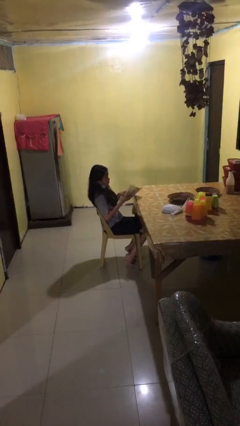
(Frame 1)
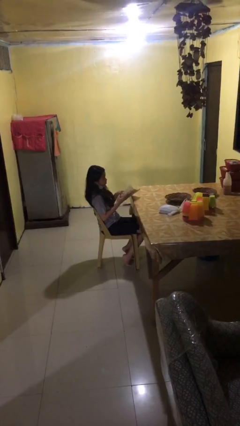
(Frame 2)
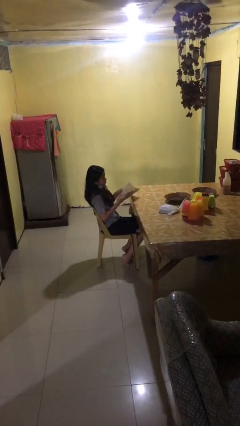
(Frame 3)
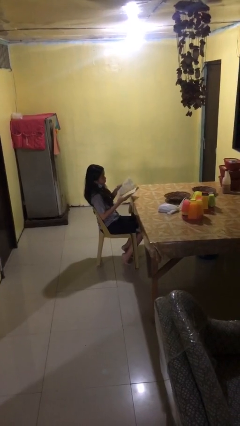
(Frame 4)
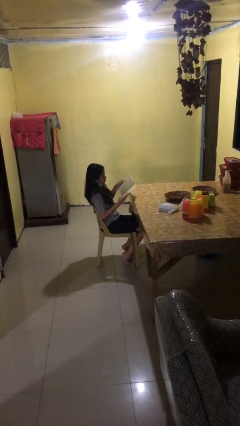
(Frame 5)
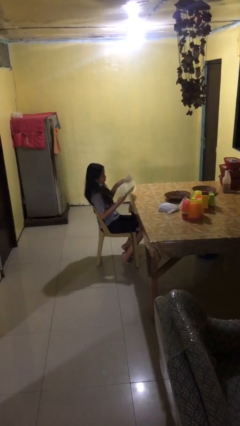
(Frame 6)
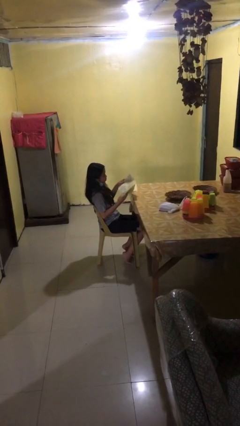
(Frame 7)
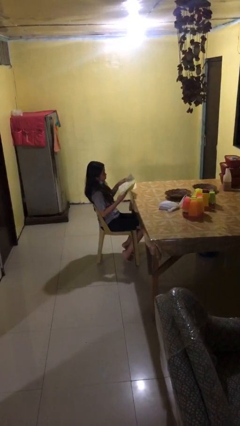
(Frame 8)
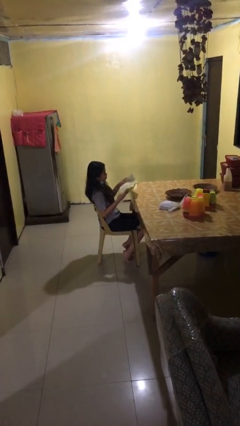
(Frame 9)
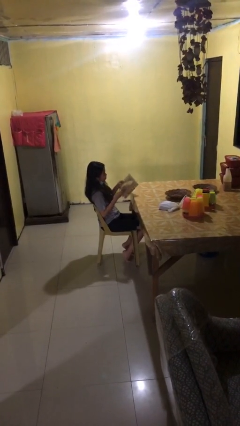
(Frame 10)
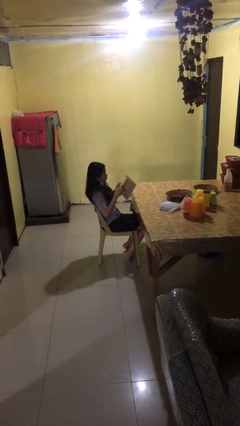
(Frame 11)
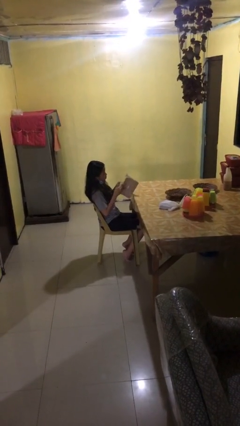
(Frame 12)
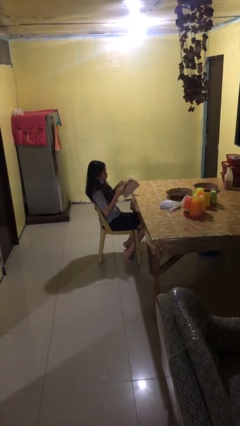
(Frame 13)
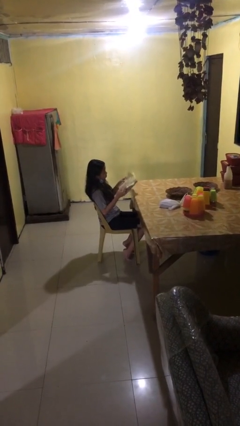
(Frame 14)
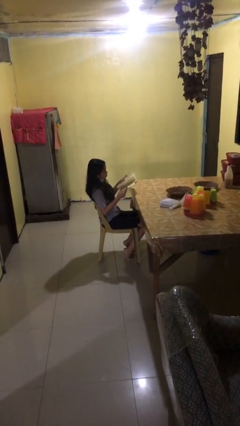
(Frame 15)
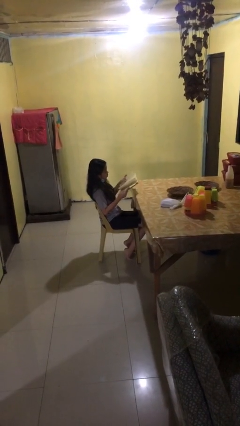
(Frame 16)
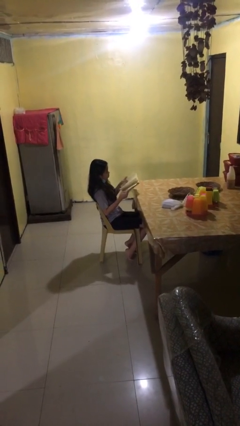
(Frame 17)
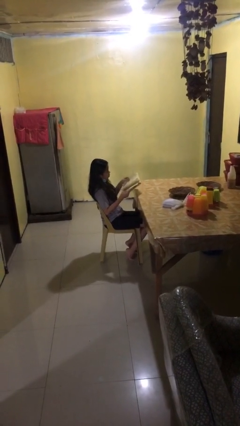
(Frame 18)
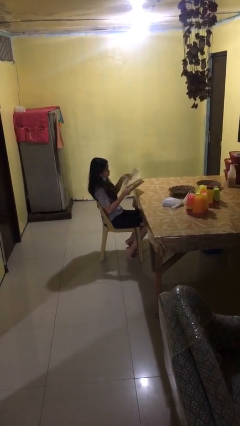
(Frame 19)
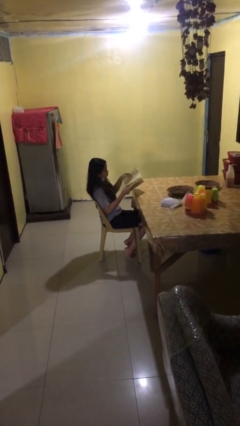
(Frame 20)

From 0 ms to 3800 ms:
person reads document

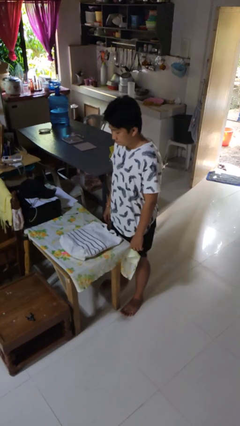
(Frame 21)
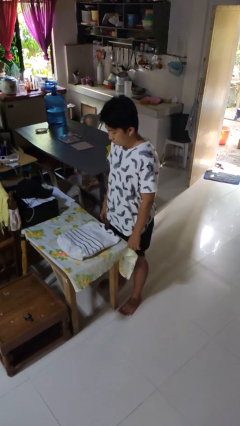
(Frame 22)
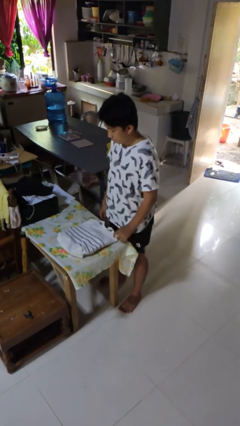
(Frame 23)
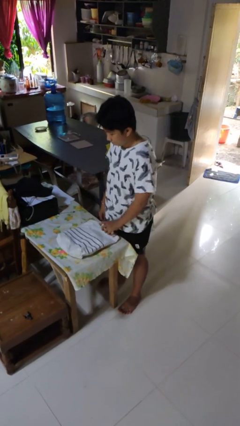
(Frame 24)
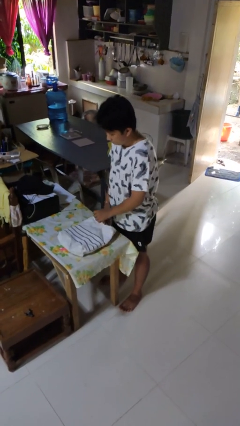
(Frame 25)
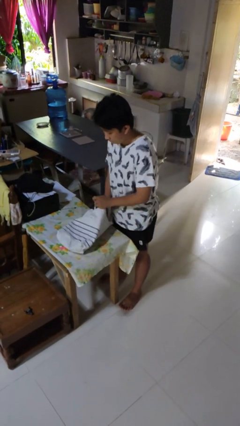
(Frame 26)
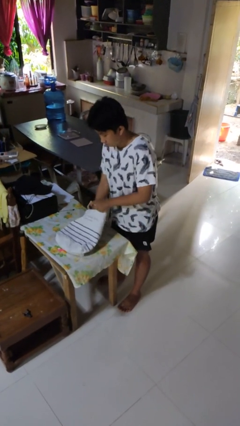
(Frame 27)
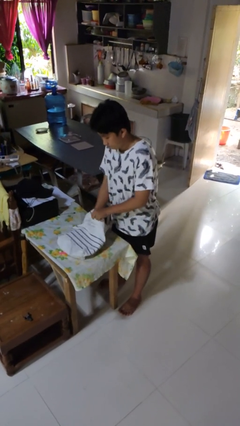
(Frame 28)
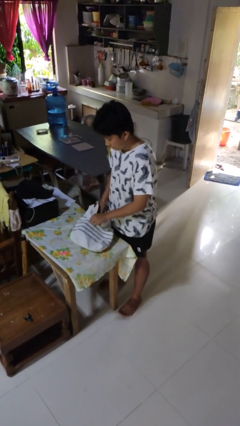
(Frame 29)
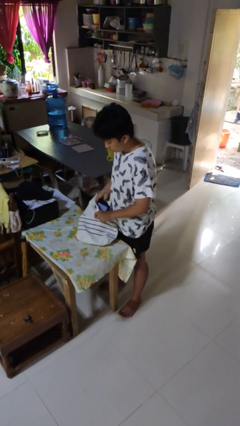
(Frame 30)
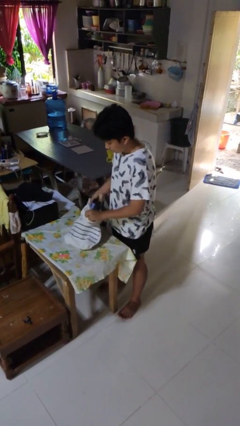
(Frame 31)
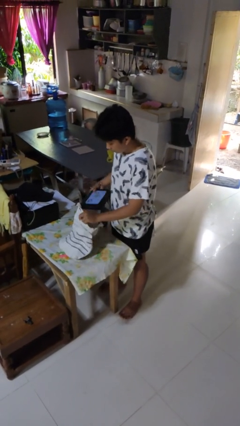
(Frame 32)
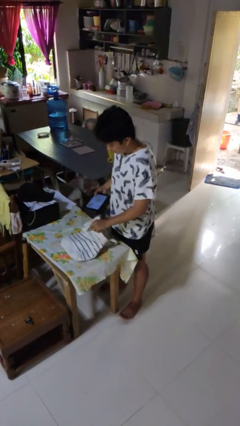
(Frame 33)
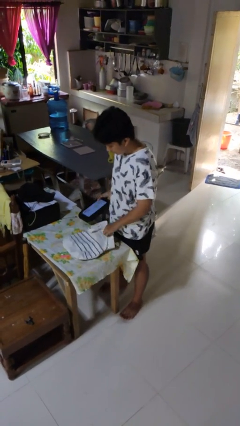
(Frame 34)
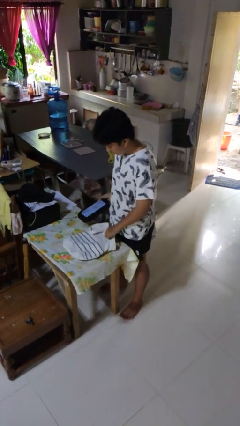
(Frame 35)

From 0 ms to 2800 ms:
person takes object from bag

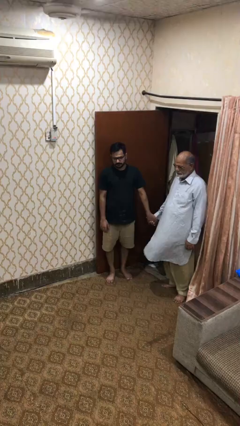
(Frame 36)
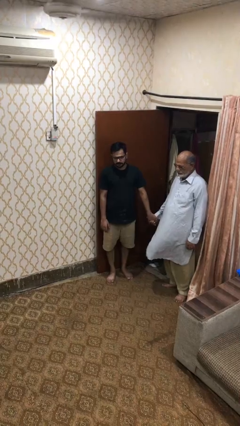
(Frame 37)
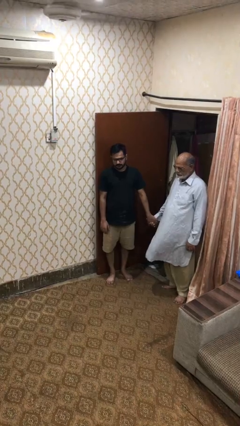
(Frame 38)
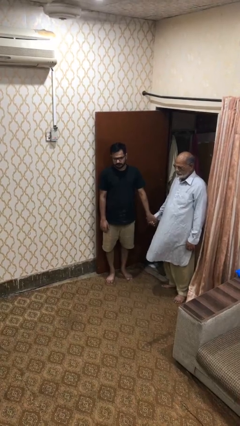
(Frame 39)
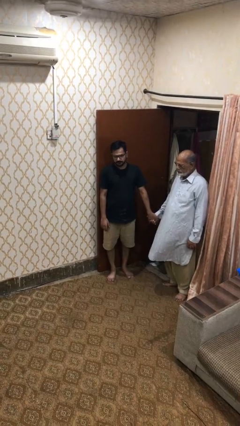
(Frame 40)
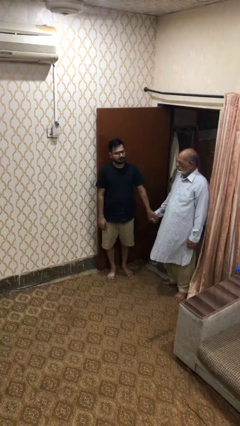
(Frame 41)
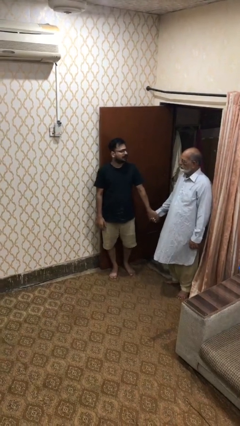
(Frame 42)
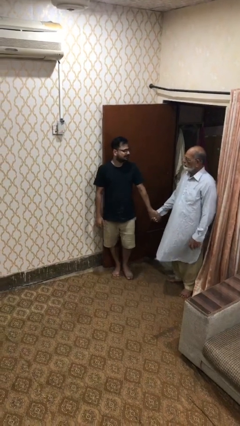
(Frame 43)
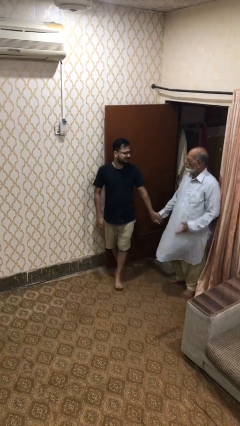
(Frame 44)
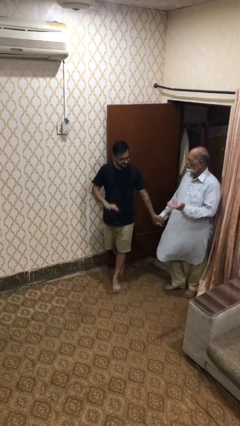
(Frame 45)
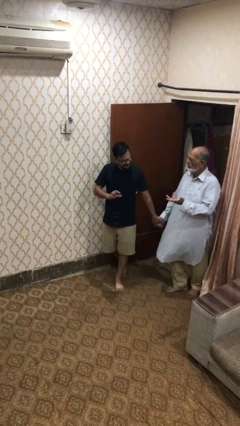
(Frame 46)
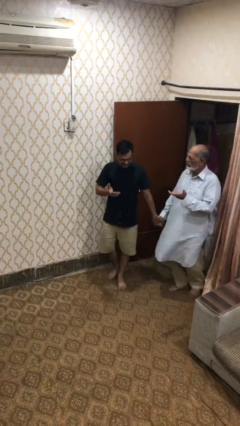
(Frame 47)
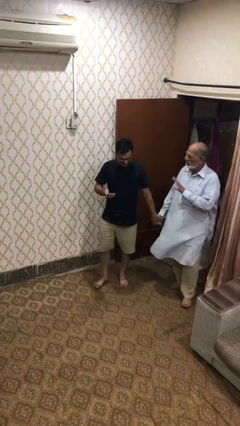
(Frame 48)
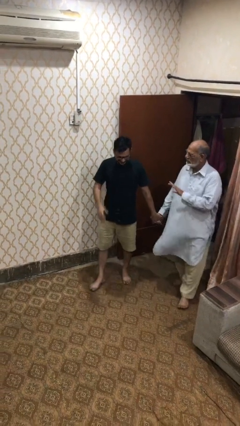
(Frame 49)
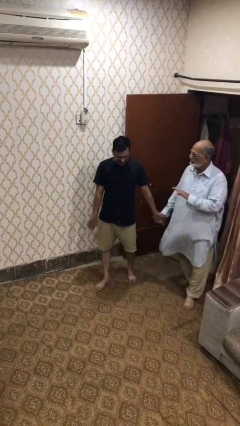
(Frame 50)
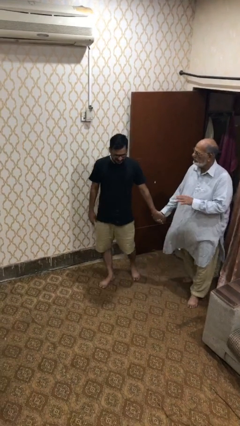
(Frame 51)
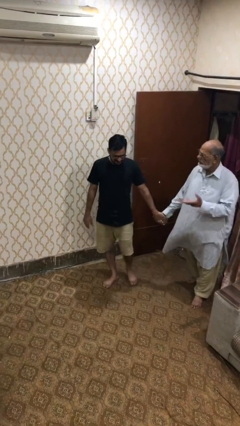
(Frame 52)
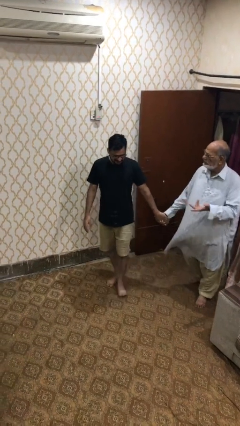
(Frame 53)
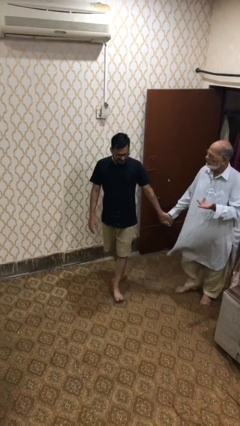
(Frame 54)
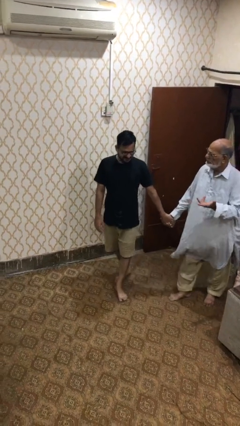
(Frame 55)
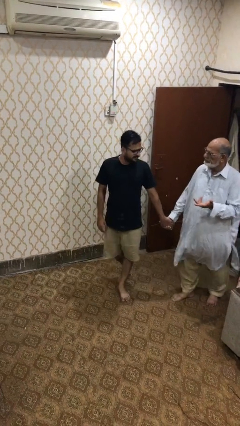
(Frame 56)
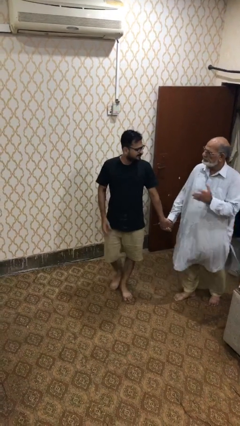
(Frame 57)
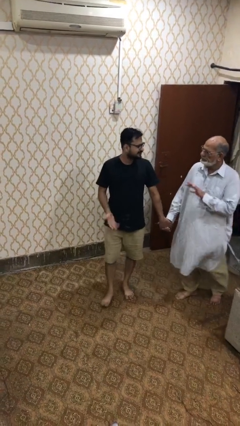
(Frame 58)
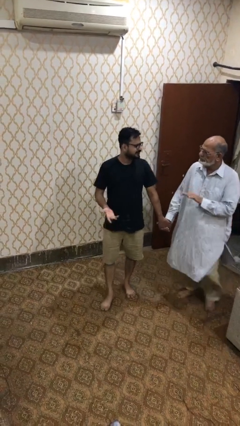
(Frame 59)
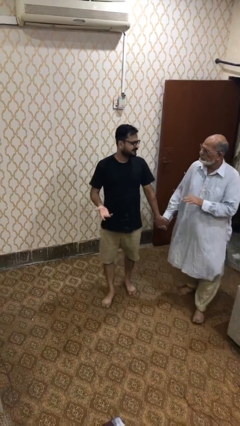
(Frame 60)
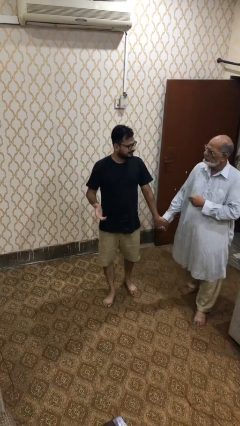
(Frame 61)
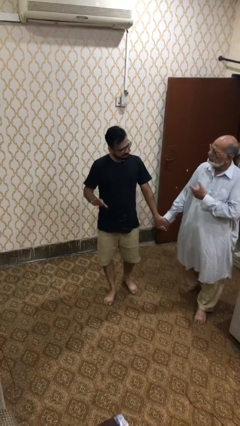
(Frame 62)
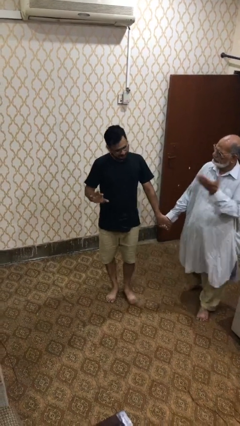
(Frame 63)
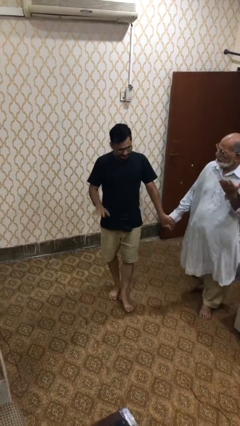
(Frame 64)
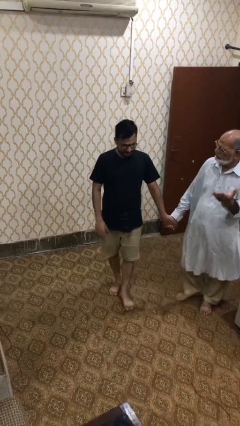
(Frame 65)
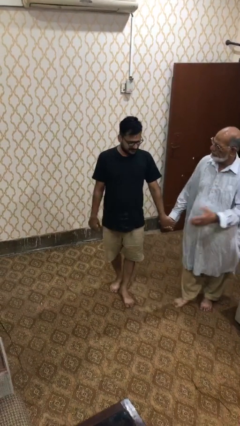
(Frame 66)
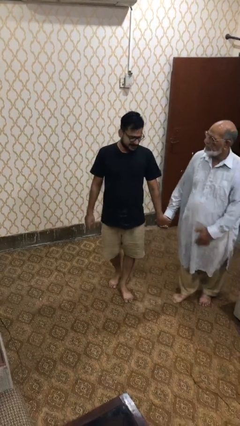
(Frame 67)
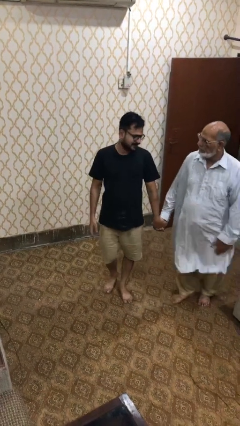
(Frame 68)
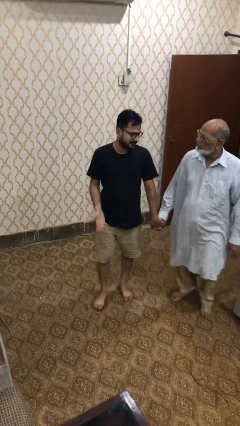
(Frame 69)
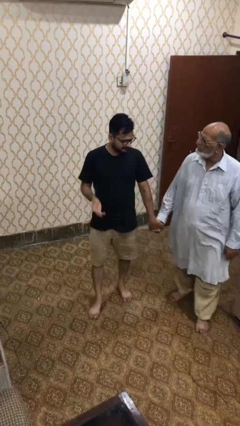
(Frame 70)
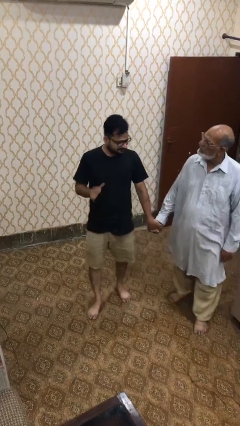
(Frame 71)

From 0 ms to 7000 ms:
person holds hand

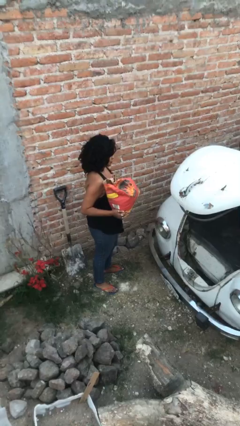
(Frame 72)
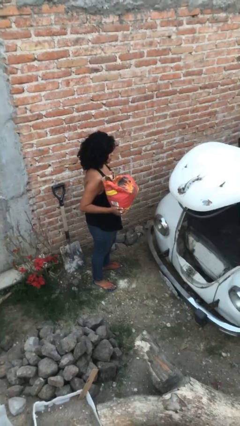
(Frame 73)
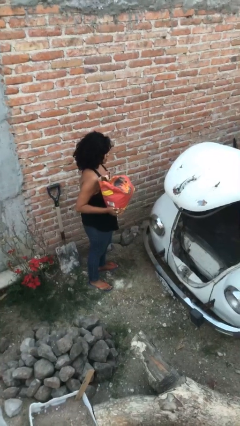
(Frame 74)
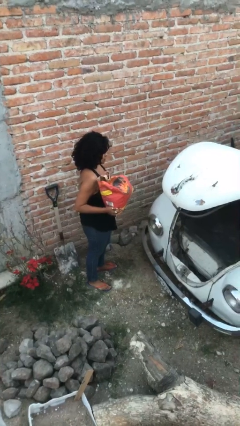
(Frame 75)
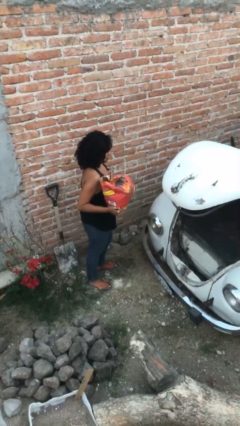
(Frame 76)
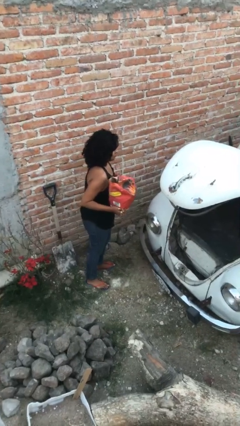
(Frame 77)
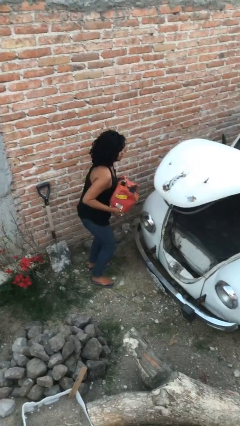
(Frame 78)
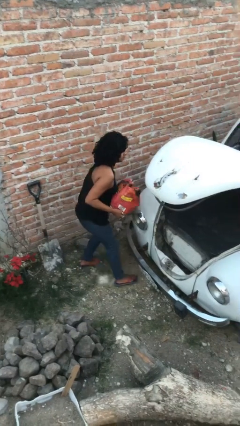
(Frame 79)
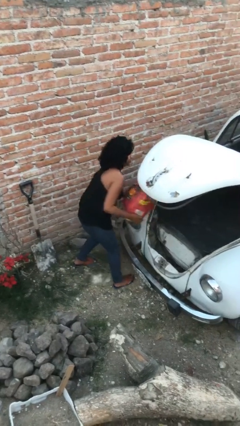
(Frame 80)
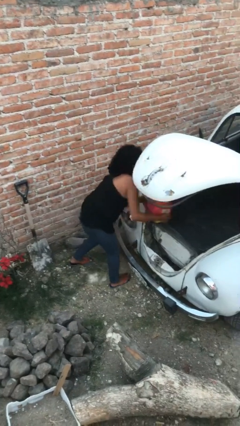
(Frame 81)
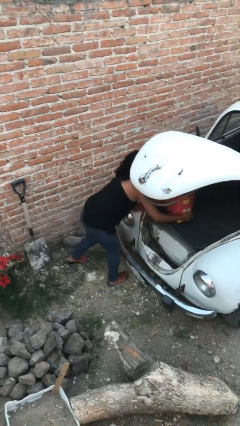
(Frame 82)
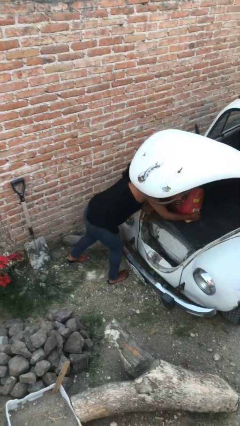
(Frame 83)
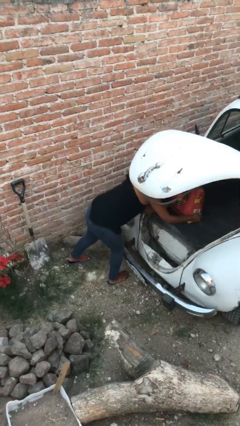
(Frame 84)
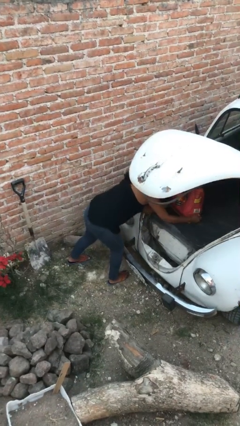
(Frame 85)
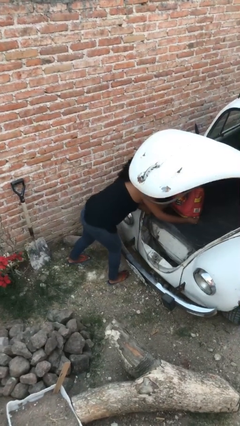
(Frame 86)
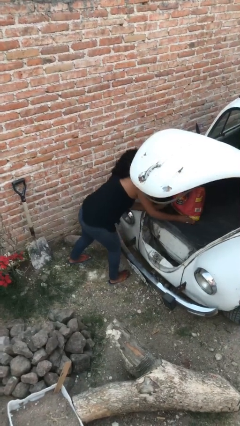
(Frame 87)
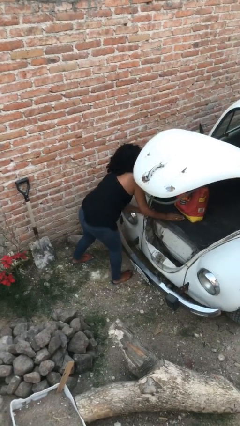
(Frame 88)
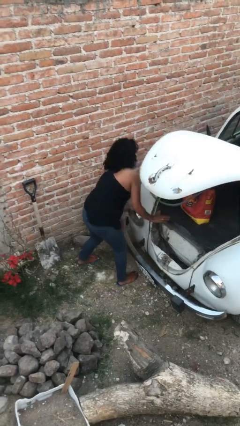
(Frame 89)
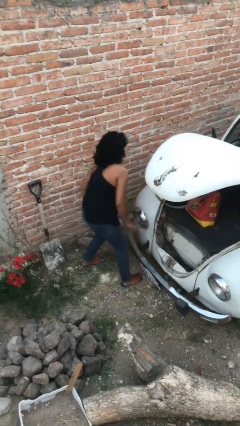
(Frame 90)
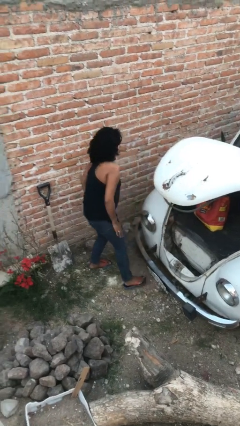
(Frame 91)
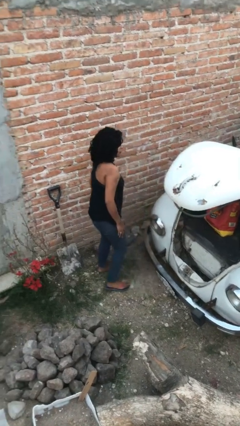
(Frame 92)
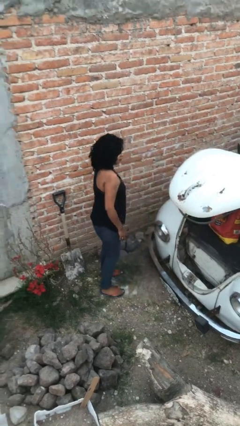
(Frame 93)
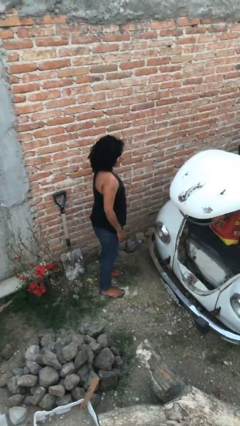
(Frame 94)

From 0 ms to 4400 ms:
person loads car
